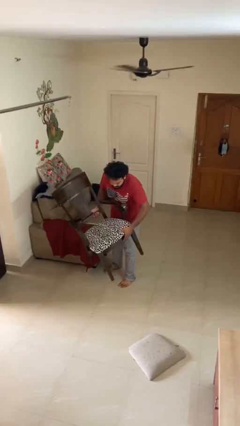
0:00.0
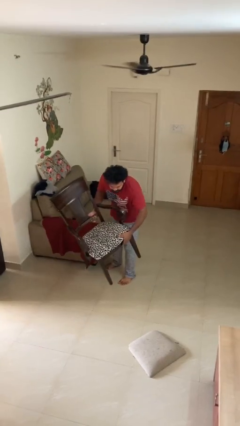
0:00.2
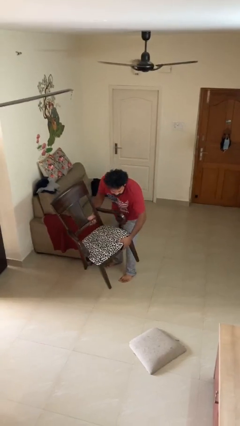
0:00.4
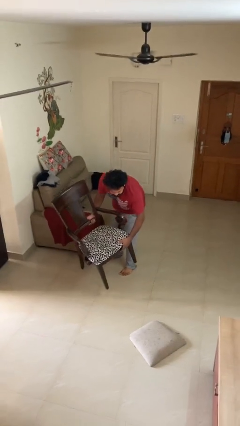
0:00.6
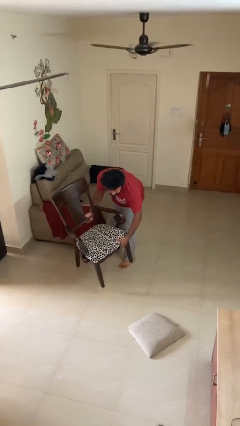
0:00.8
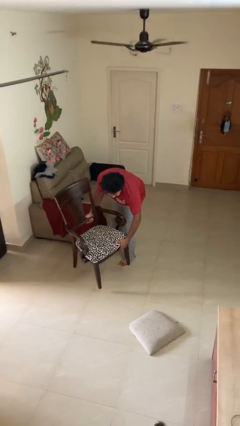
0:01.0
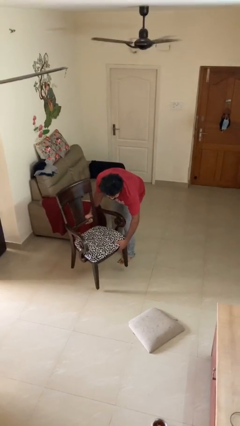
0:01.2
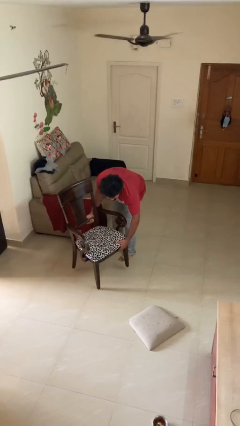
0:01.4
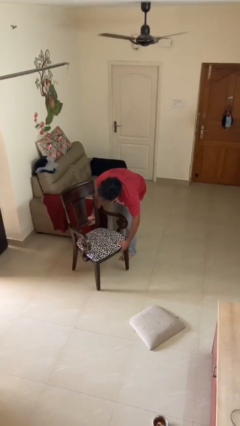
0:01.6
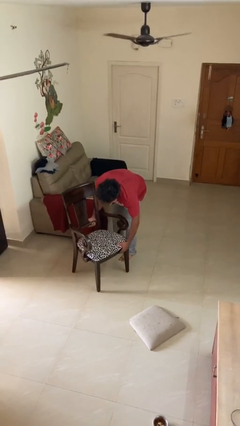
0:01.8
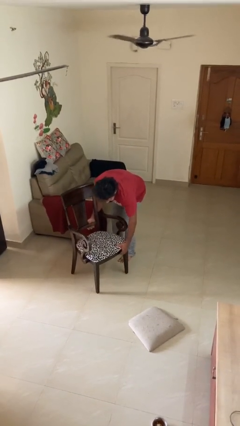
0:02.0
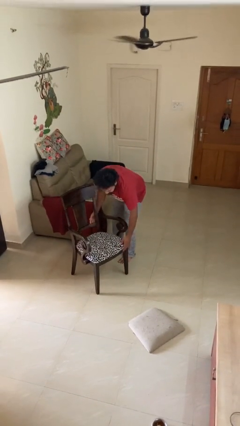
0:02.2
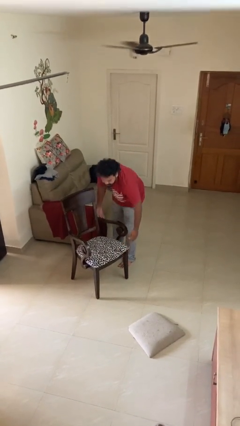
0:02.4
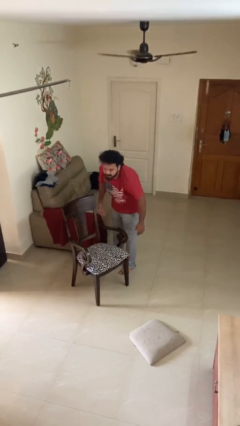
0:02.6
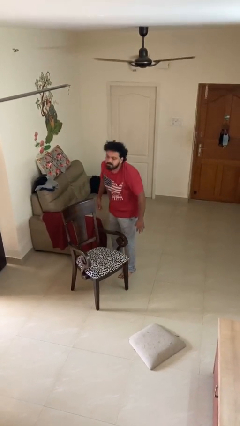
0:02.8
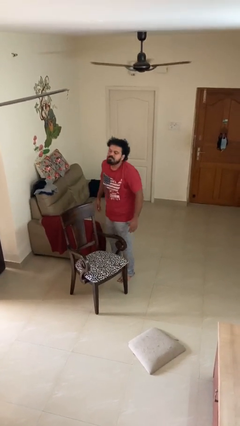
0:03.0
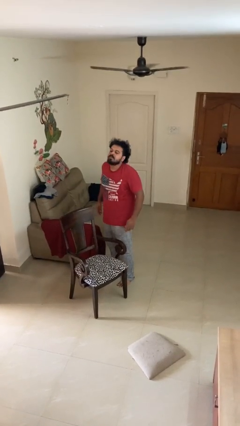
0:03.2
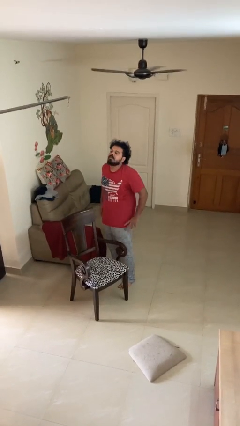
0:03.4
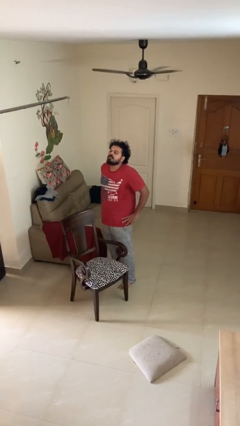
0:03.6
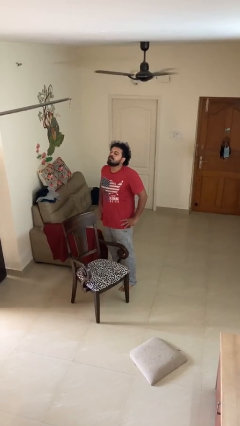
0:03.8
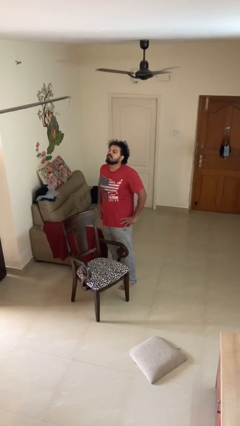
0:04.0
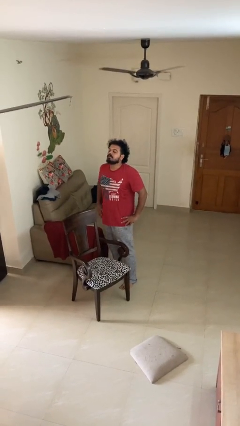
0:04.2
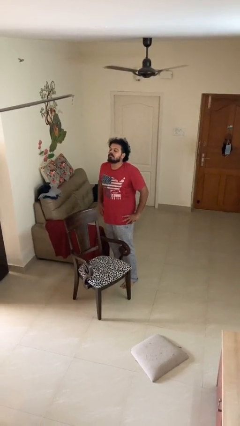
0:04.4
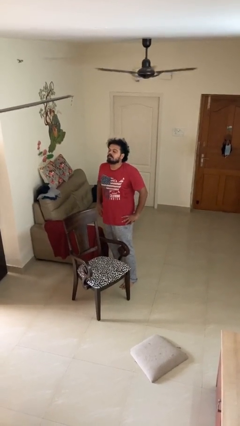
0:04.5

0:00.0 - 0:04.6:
person puts down object on floor

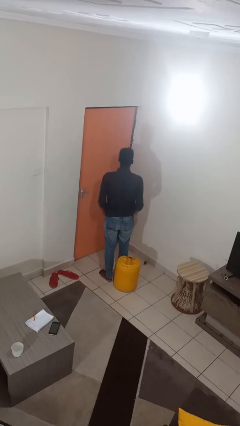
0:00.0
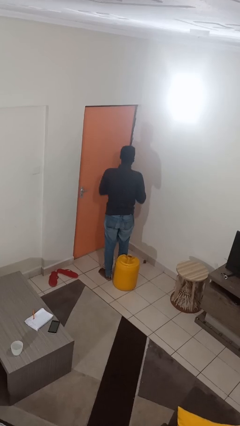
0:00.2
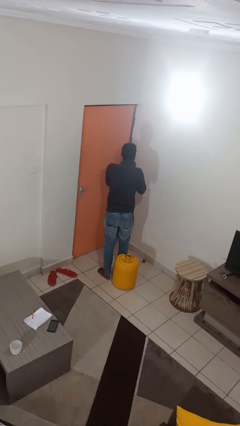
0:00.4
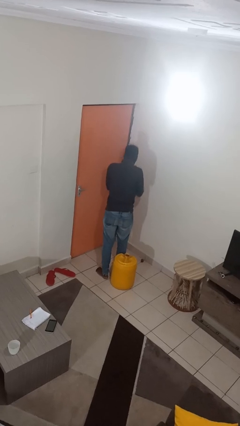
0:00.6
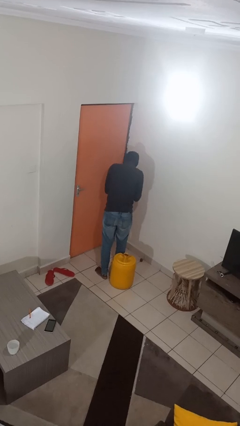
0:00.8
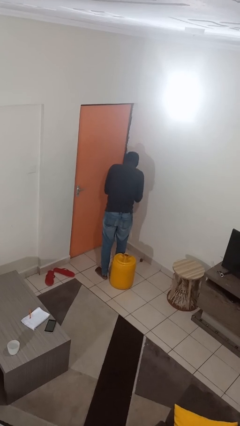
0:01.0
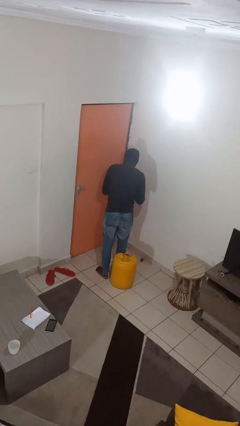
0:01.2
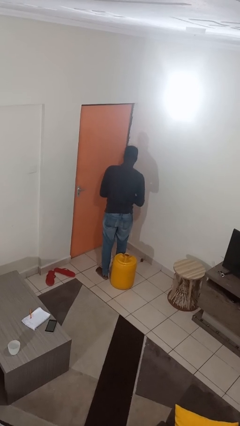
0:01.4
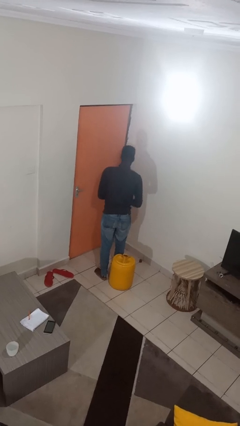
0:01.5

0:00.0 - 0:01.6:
person sneezes into hand

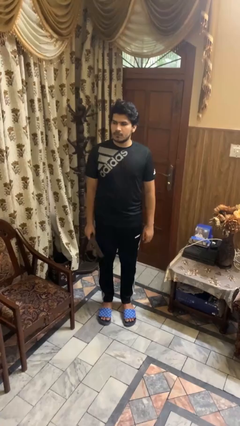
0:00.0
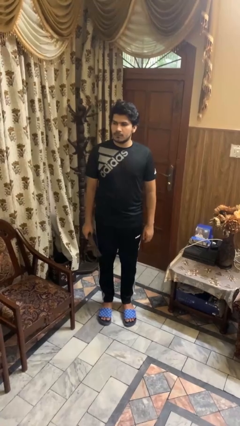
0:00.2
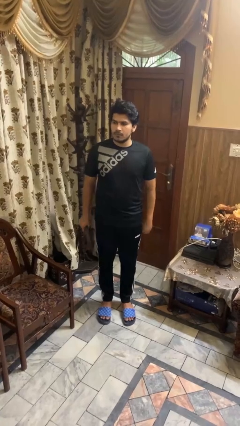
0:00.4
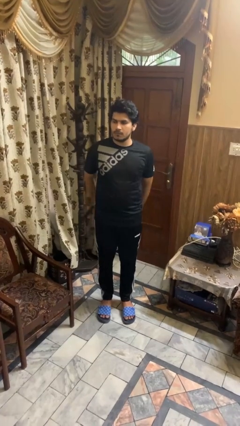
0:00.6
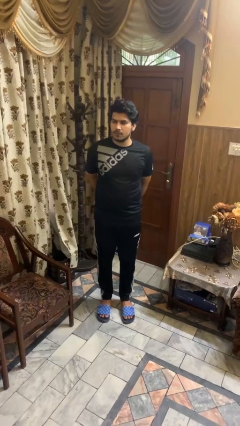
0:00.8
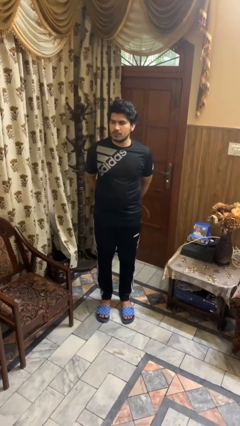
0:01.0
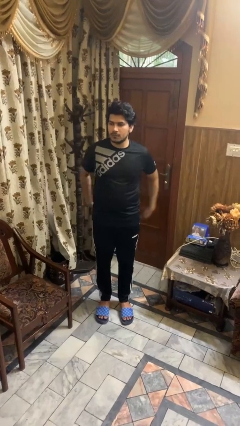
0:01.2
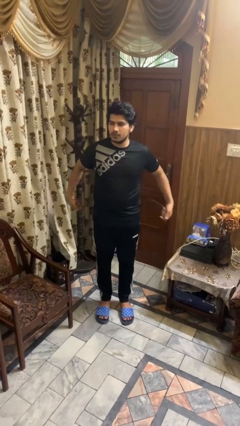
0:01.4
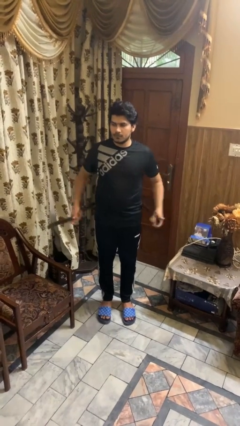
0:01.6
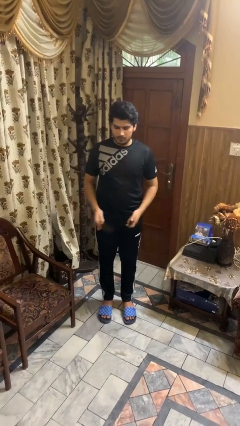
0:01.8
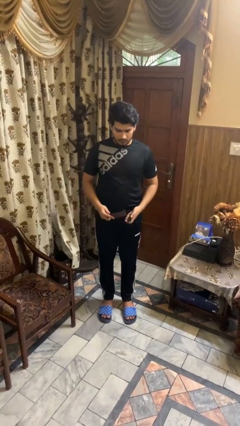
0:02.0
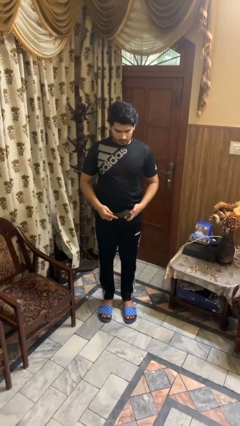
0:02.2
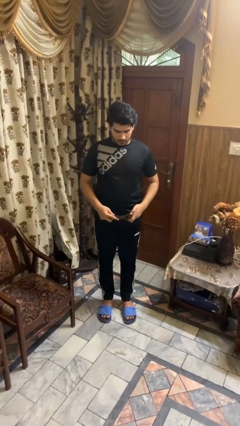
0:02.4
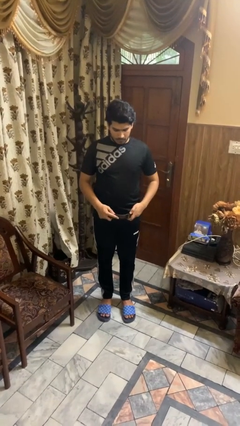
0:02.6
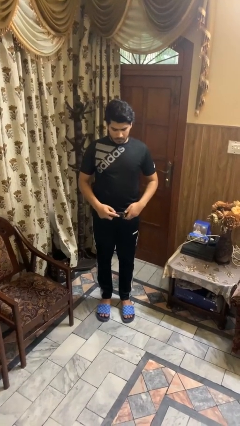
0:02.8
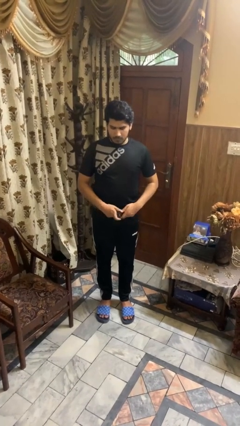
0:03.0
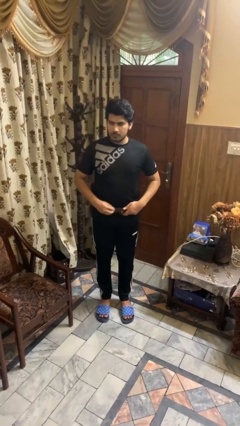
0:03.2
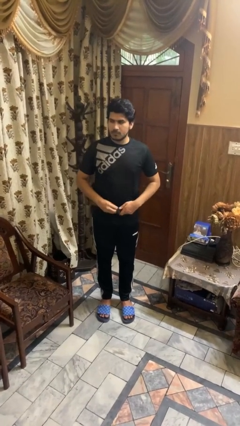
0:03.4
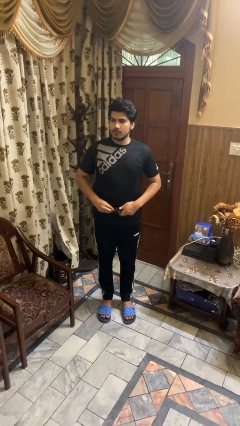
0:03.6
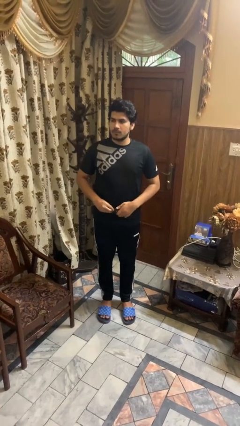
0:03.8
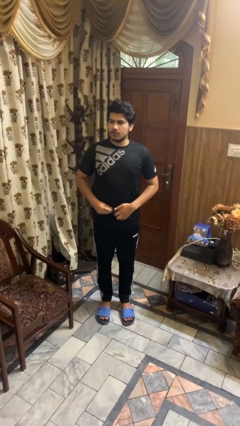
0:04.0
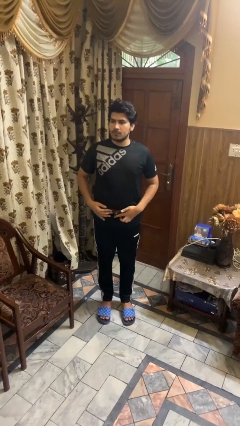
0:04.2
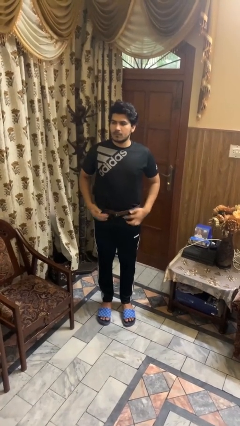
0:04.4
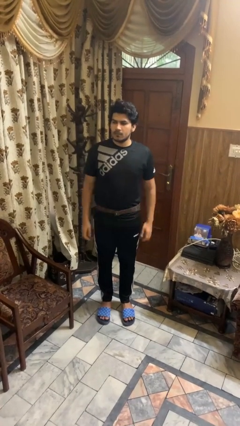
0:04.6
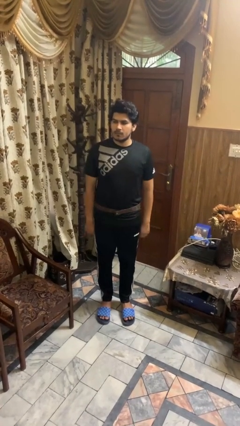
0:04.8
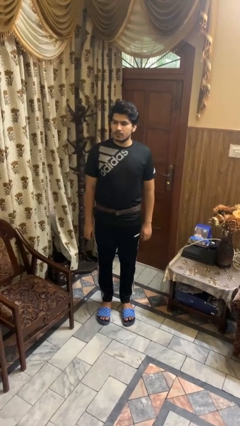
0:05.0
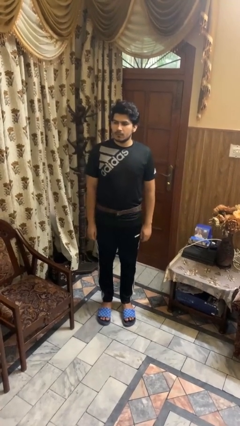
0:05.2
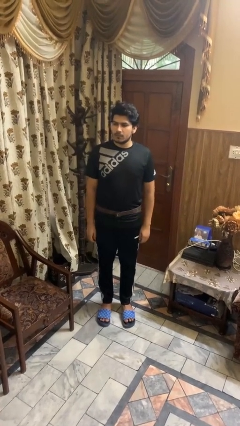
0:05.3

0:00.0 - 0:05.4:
person puts on belt

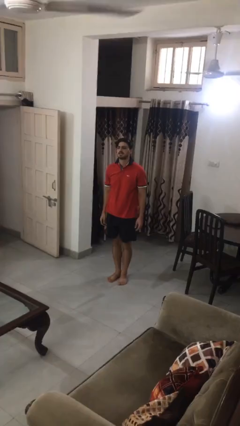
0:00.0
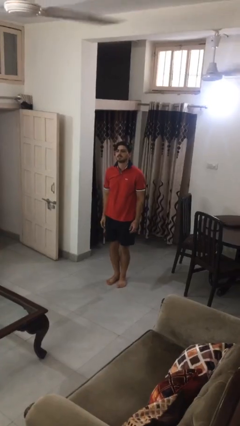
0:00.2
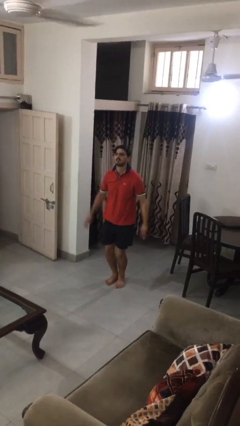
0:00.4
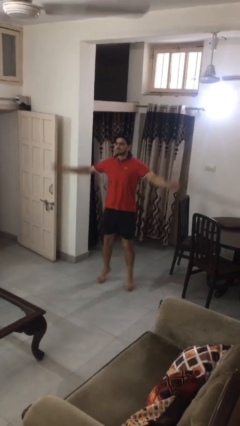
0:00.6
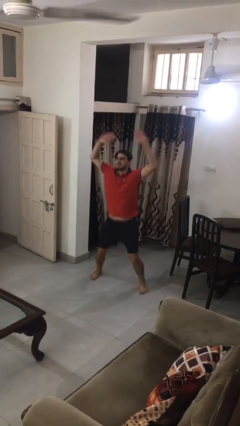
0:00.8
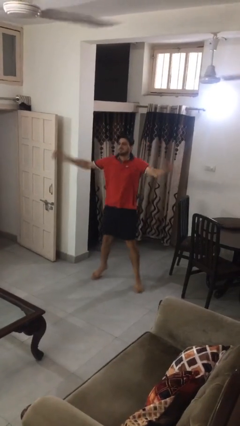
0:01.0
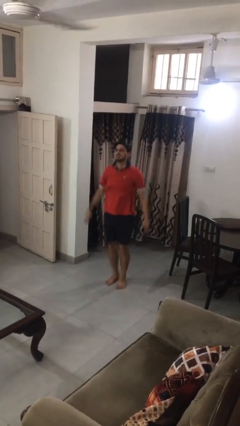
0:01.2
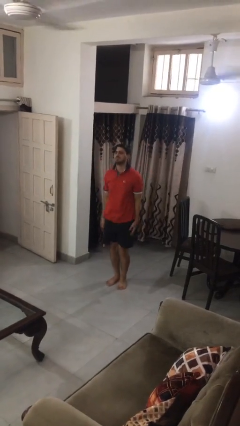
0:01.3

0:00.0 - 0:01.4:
person exercises with jumping jacks

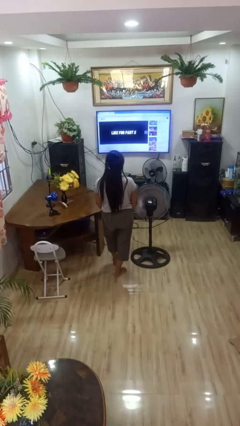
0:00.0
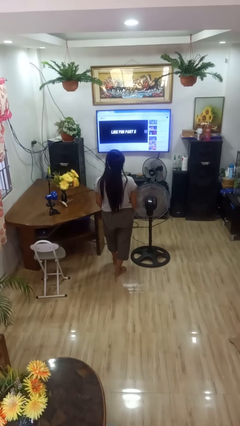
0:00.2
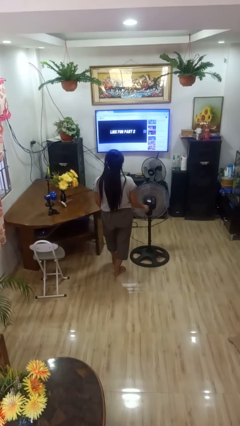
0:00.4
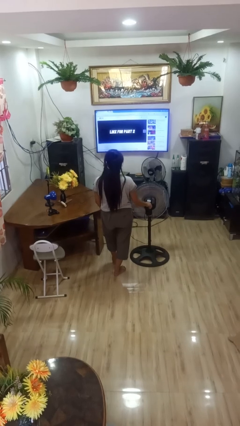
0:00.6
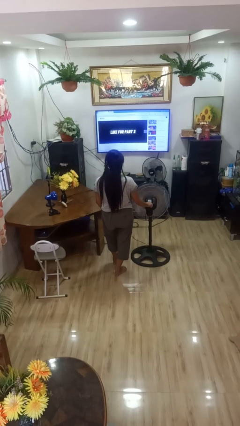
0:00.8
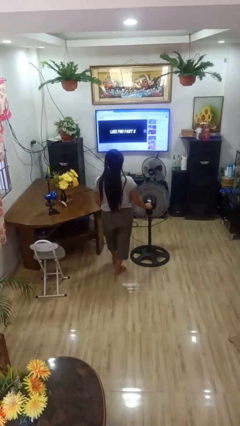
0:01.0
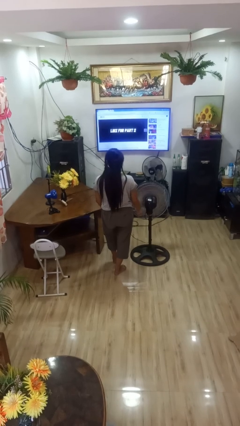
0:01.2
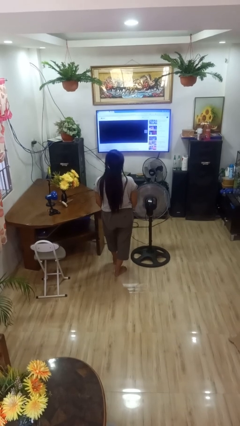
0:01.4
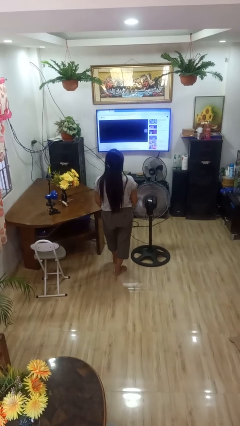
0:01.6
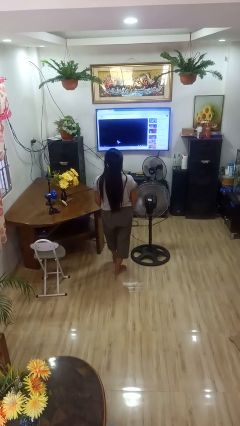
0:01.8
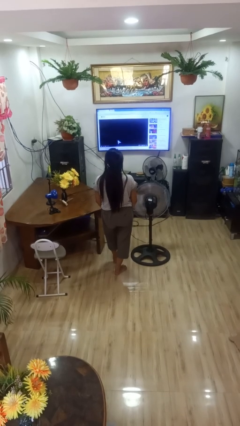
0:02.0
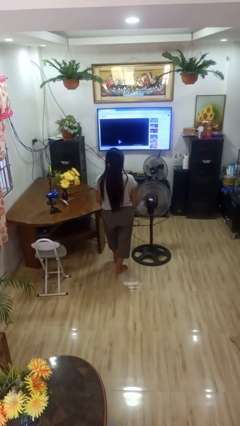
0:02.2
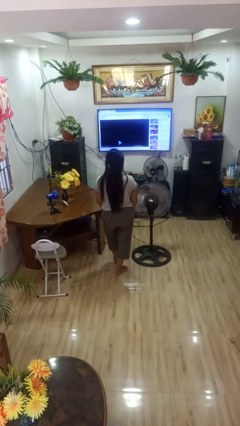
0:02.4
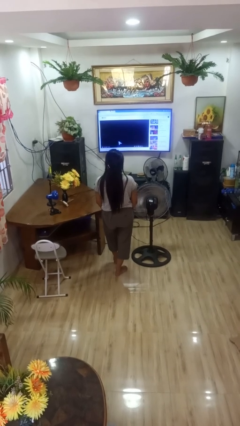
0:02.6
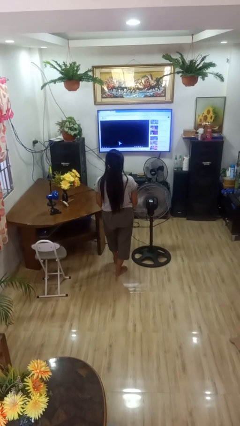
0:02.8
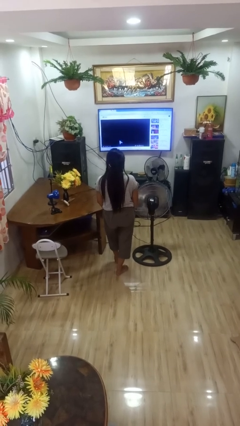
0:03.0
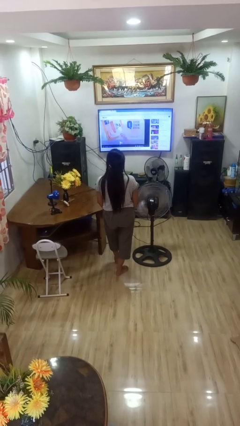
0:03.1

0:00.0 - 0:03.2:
person turns off fan

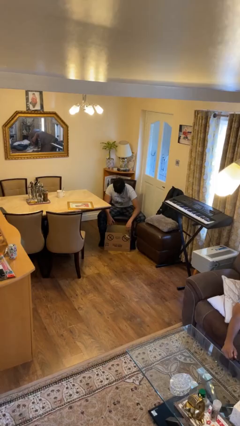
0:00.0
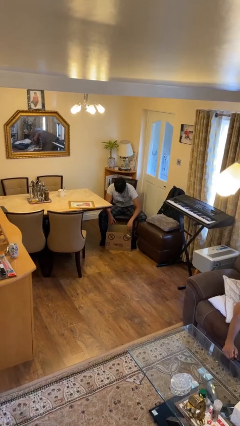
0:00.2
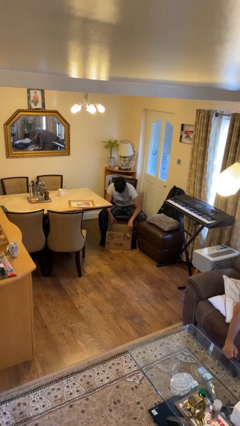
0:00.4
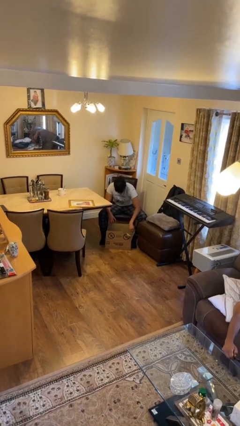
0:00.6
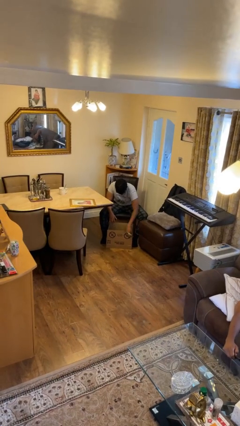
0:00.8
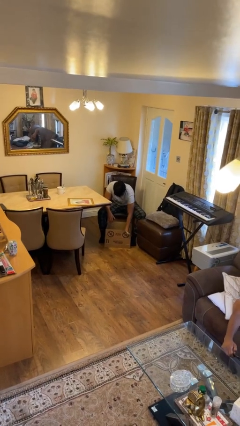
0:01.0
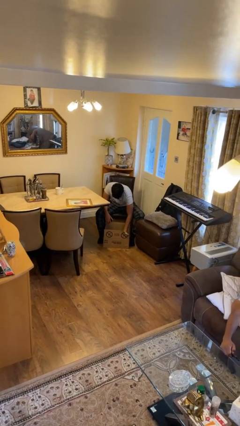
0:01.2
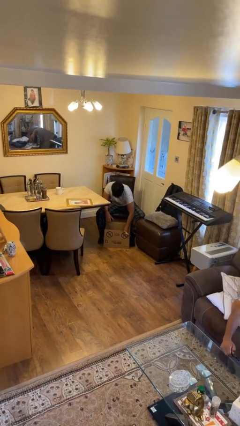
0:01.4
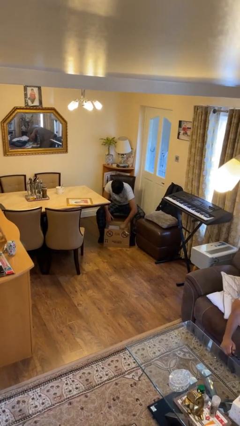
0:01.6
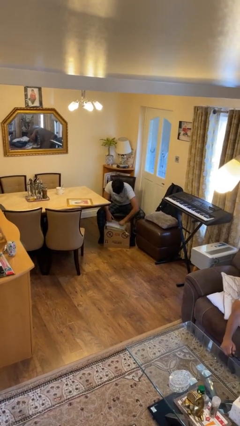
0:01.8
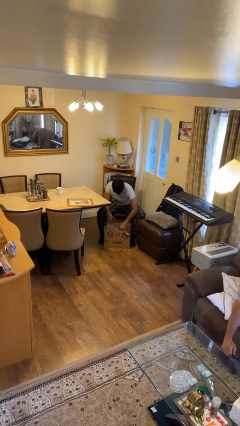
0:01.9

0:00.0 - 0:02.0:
person searches in box
